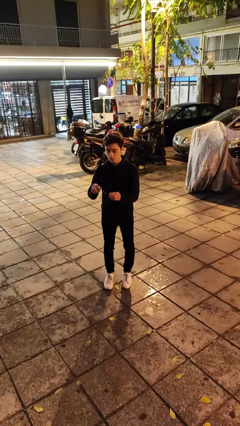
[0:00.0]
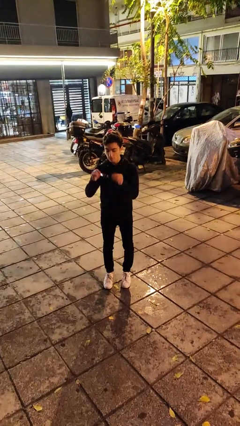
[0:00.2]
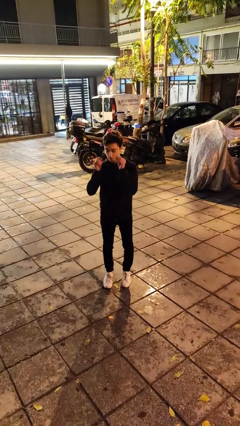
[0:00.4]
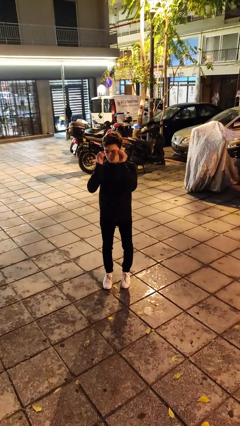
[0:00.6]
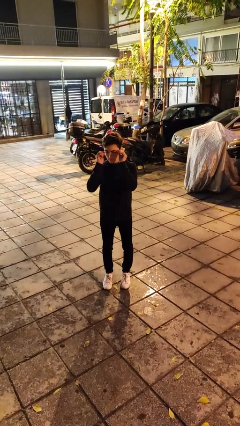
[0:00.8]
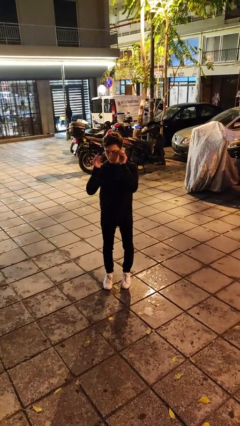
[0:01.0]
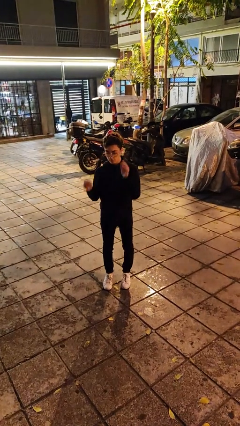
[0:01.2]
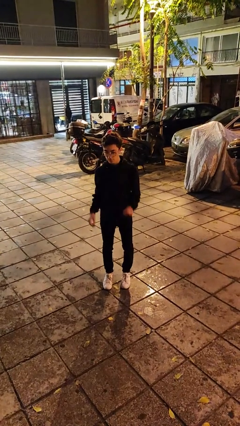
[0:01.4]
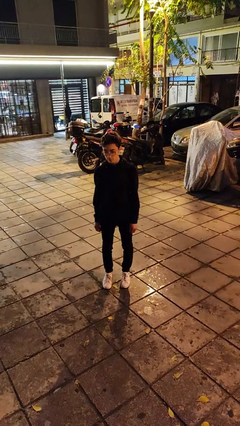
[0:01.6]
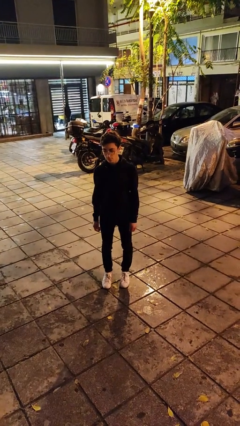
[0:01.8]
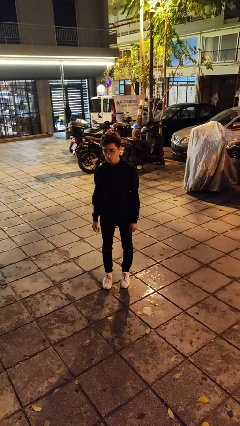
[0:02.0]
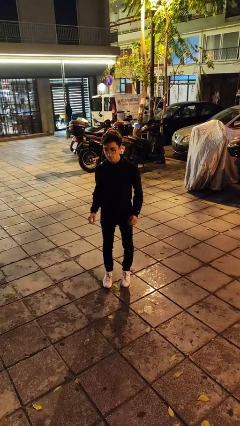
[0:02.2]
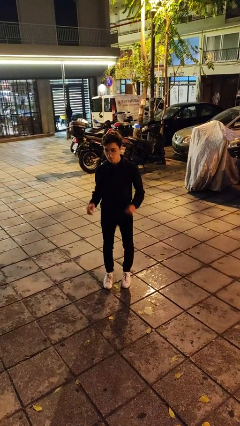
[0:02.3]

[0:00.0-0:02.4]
person puts on glasses

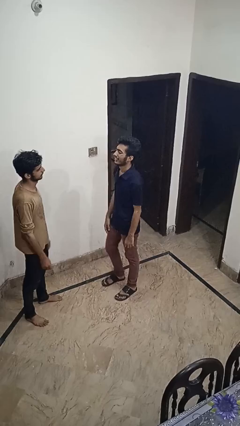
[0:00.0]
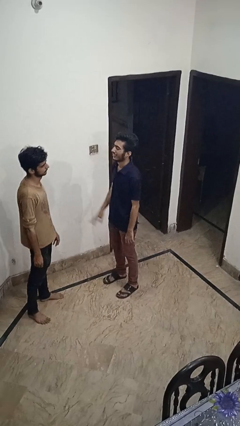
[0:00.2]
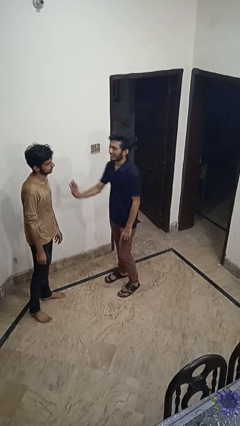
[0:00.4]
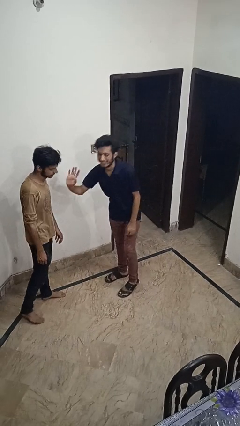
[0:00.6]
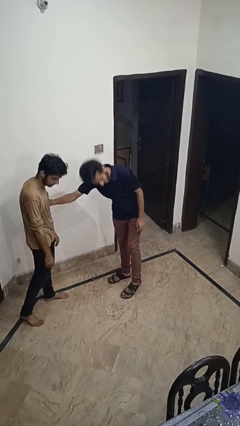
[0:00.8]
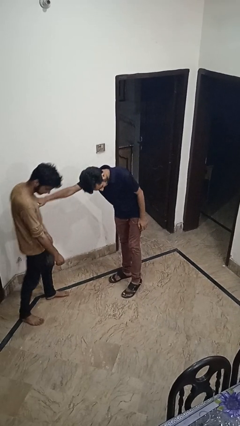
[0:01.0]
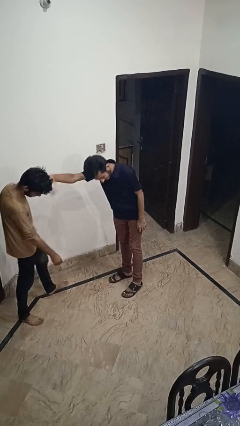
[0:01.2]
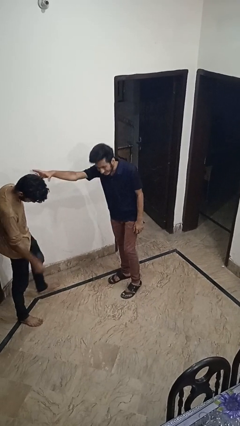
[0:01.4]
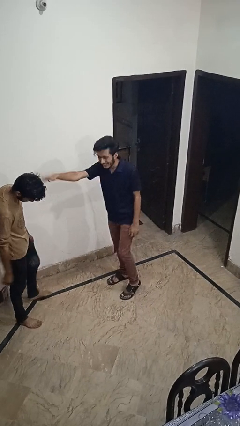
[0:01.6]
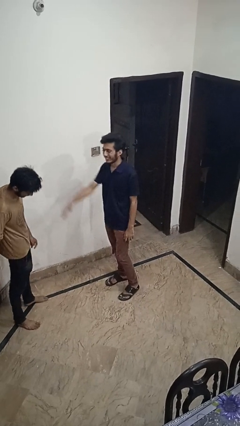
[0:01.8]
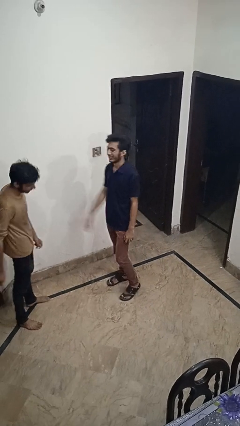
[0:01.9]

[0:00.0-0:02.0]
person shoves person

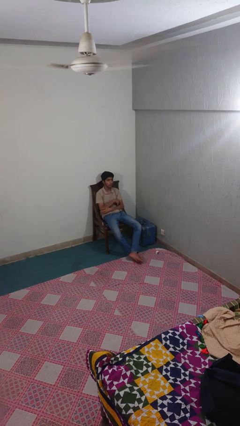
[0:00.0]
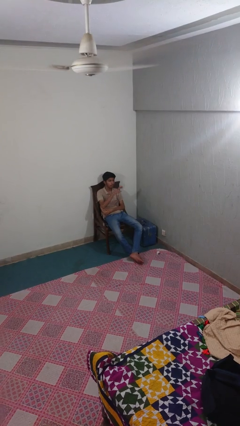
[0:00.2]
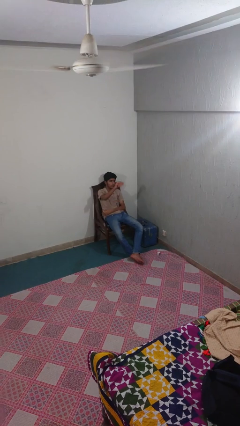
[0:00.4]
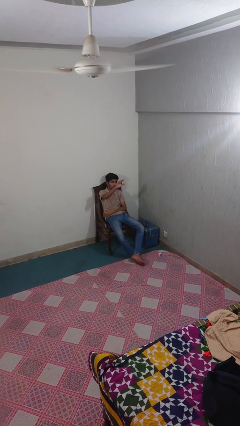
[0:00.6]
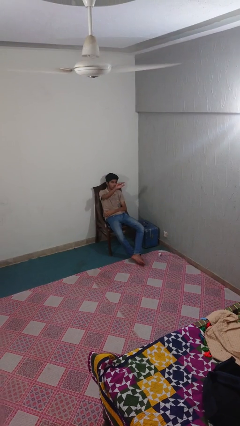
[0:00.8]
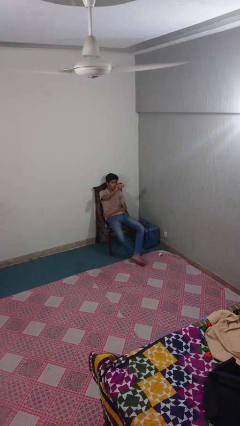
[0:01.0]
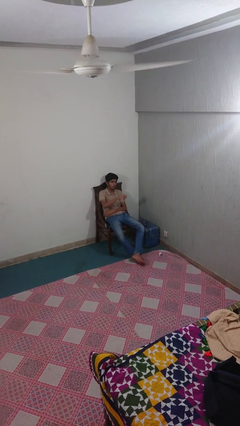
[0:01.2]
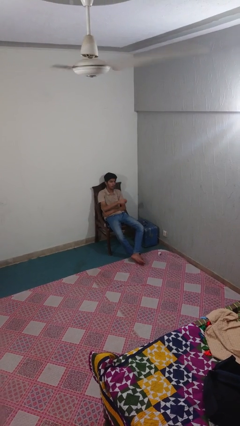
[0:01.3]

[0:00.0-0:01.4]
person gestures come here

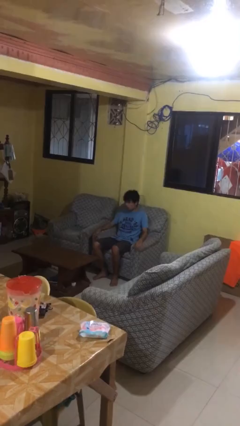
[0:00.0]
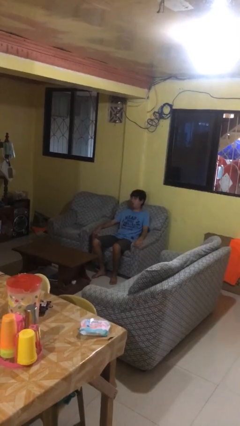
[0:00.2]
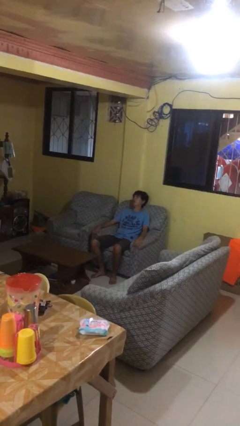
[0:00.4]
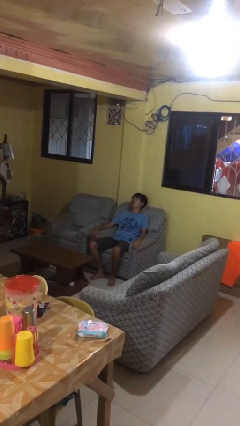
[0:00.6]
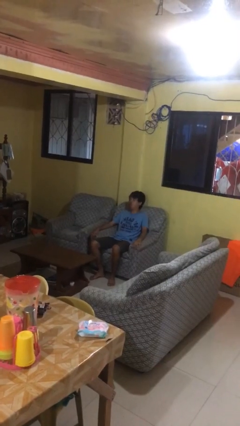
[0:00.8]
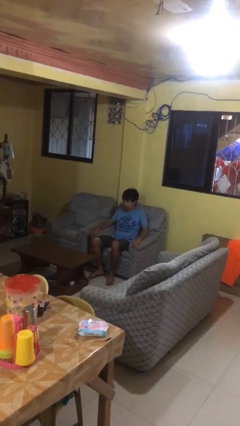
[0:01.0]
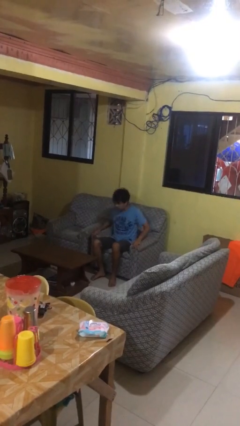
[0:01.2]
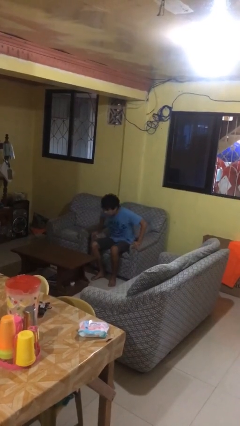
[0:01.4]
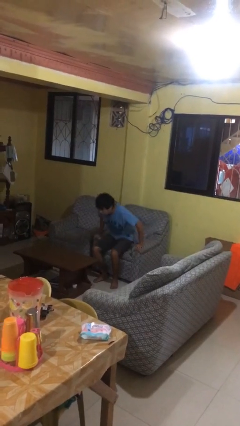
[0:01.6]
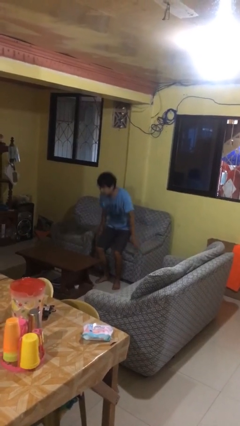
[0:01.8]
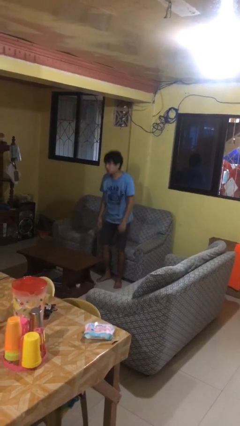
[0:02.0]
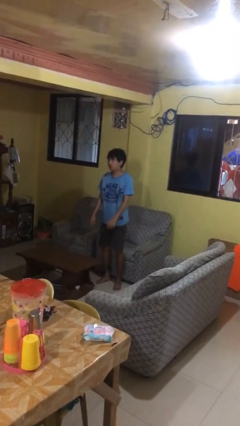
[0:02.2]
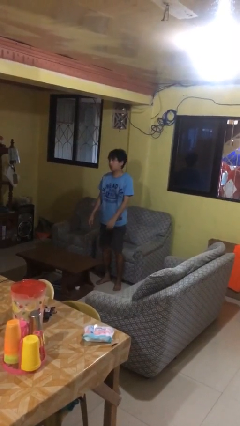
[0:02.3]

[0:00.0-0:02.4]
person stands up

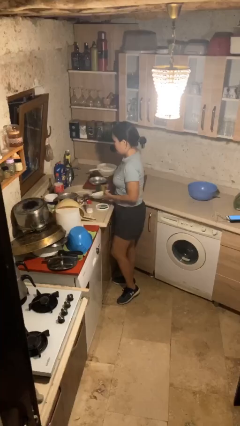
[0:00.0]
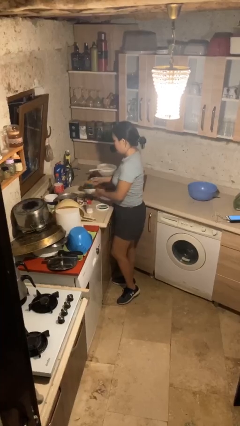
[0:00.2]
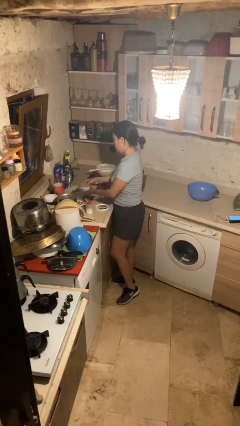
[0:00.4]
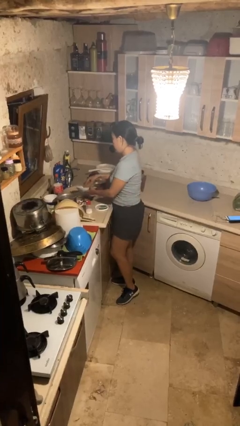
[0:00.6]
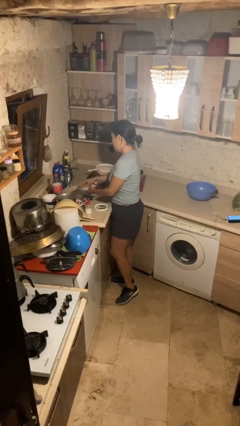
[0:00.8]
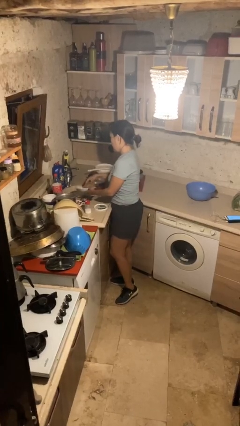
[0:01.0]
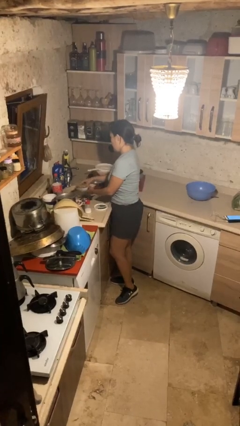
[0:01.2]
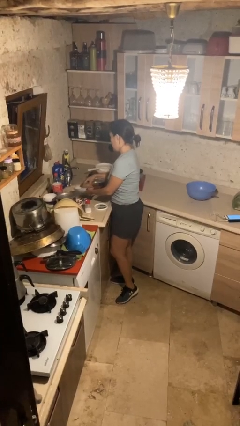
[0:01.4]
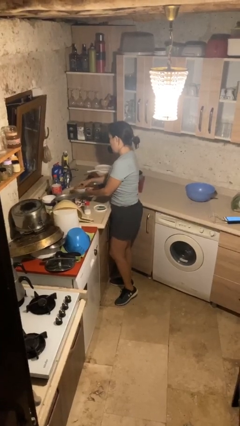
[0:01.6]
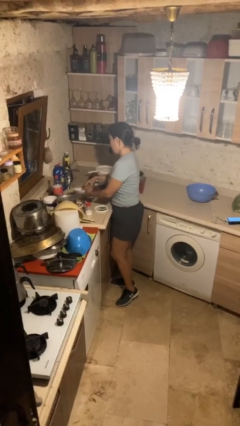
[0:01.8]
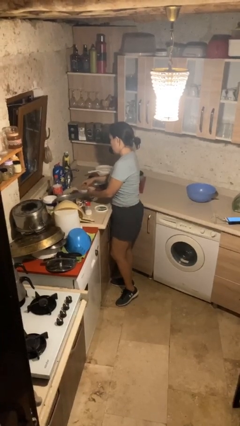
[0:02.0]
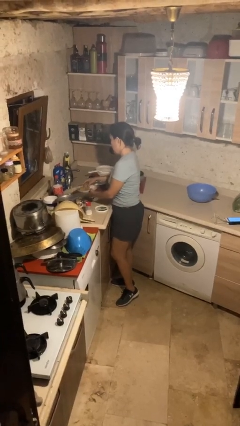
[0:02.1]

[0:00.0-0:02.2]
person washes dish

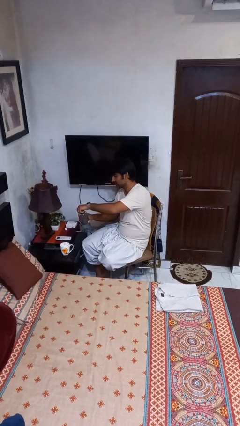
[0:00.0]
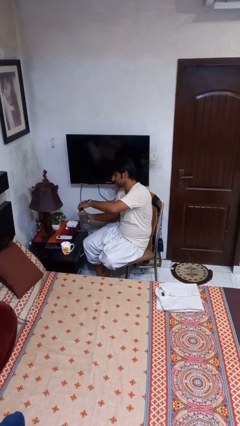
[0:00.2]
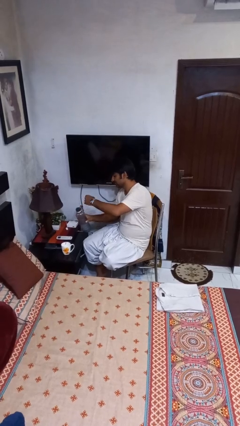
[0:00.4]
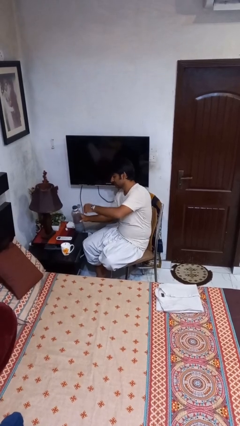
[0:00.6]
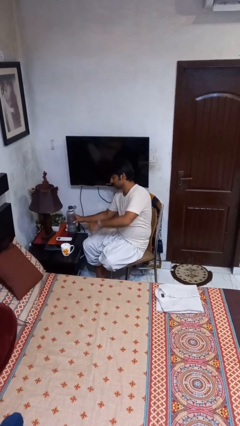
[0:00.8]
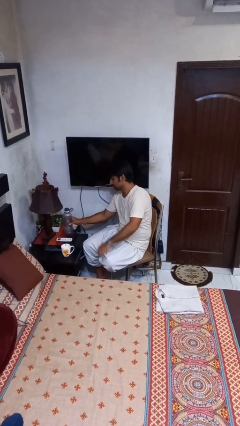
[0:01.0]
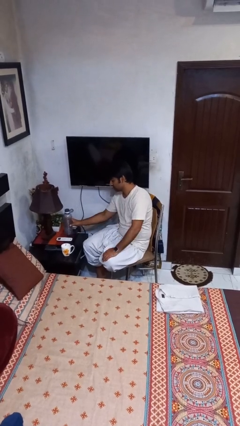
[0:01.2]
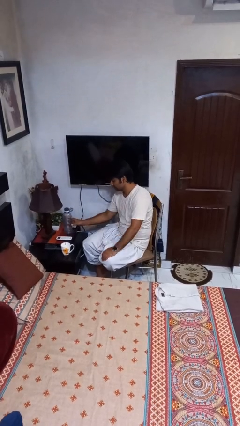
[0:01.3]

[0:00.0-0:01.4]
person screws lid to bottle

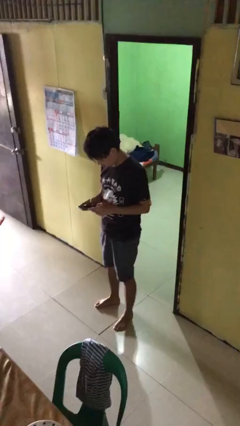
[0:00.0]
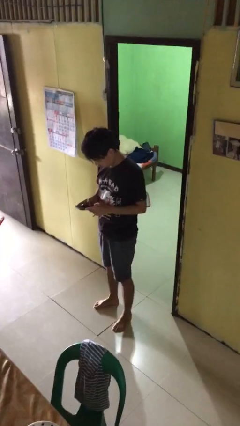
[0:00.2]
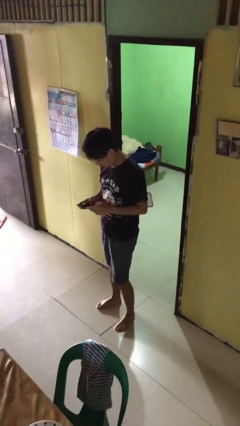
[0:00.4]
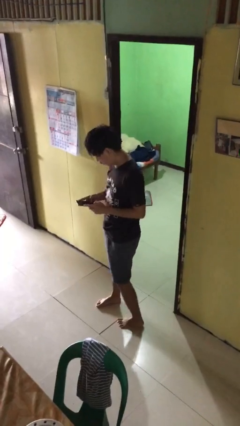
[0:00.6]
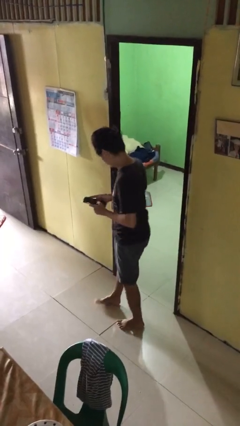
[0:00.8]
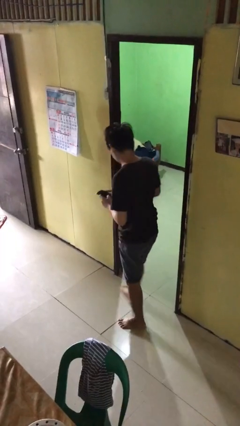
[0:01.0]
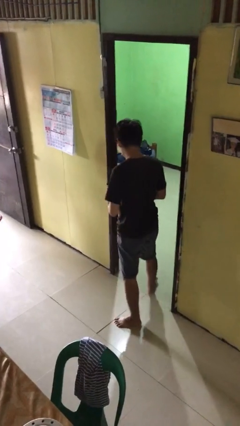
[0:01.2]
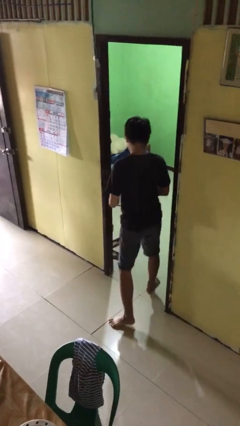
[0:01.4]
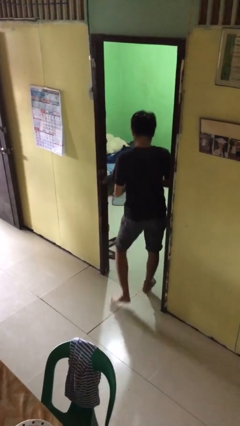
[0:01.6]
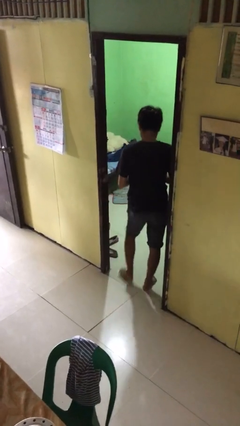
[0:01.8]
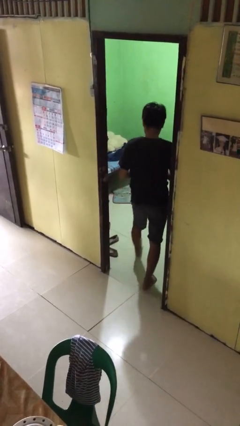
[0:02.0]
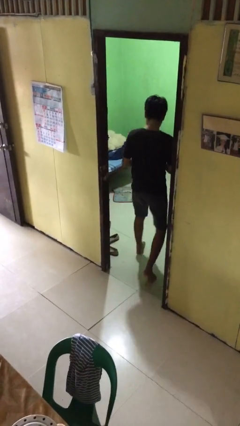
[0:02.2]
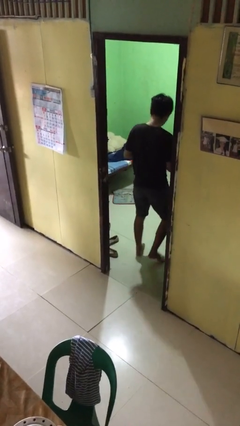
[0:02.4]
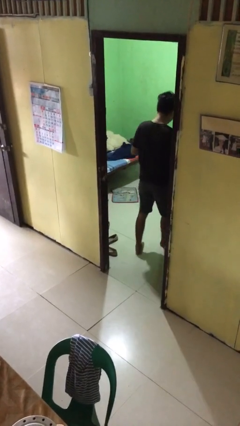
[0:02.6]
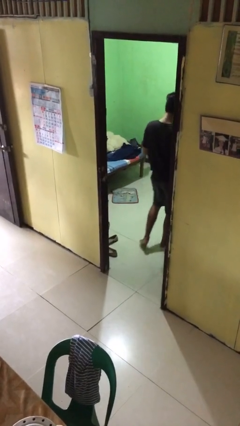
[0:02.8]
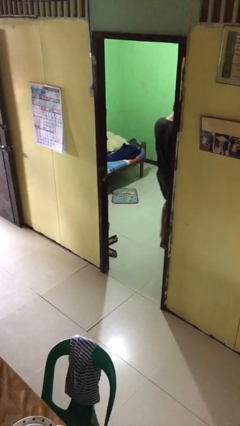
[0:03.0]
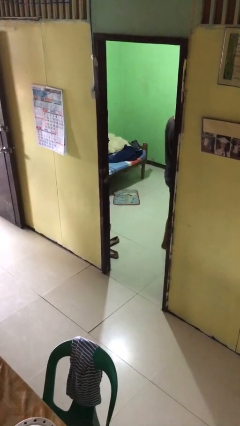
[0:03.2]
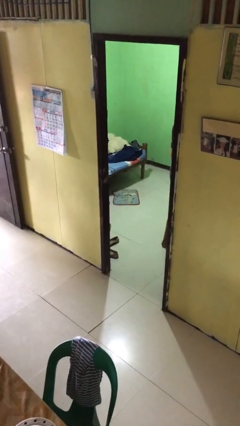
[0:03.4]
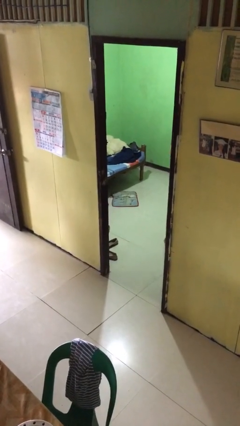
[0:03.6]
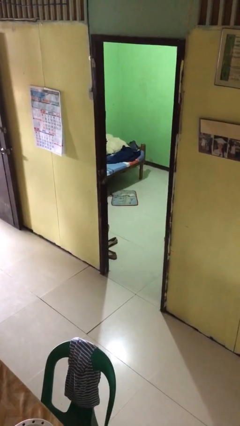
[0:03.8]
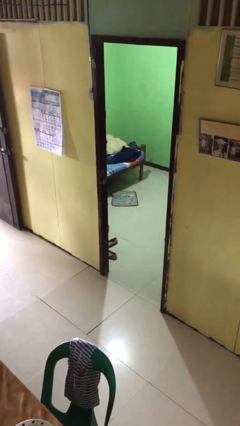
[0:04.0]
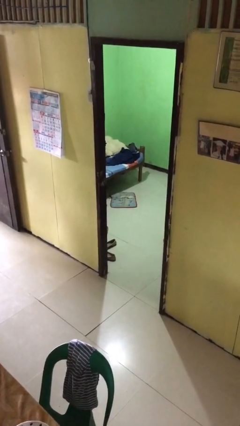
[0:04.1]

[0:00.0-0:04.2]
person exits scene through structure

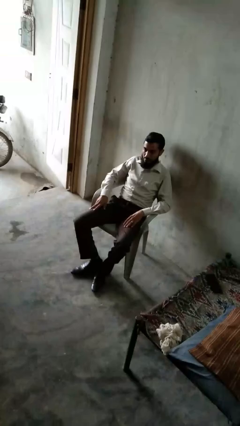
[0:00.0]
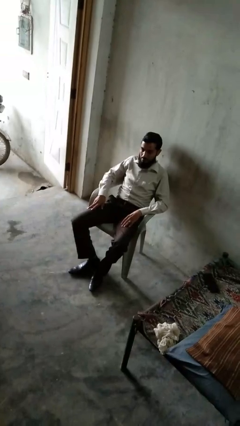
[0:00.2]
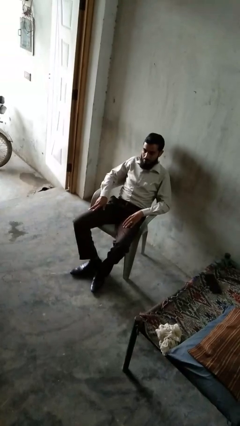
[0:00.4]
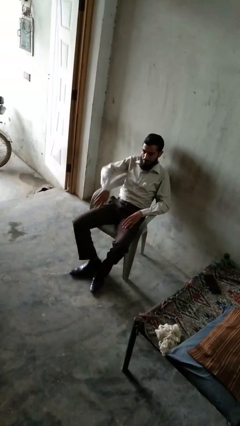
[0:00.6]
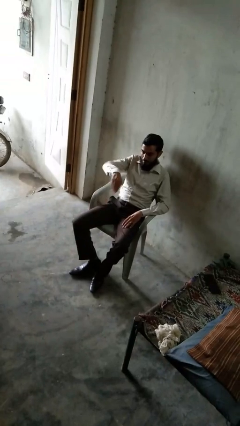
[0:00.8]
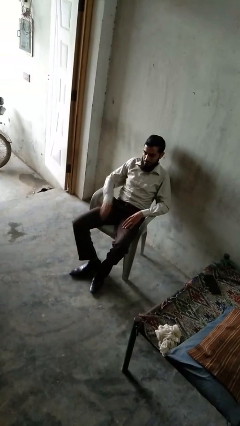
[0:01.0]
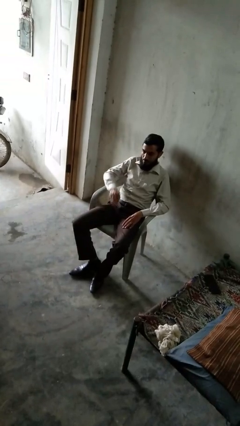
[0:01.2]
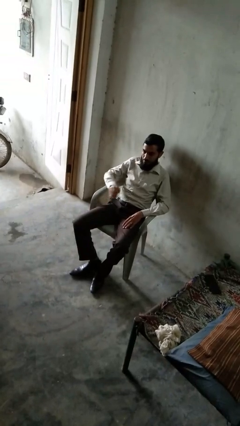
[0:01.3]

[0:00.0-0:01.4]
person slaps hands on thighs
